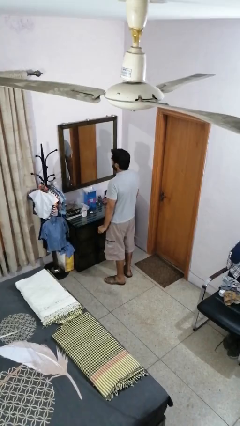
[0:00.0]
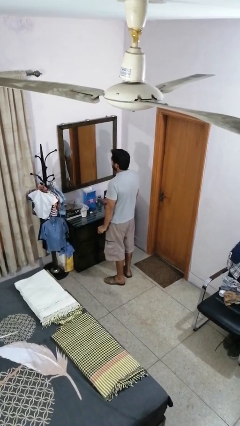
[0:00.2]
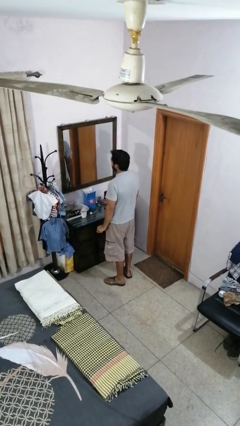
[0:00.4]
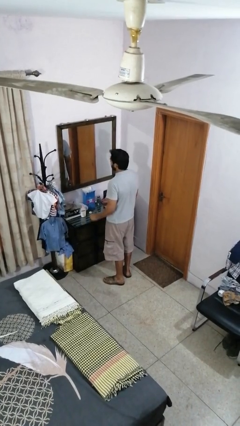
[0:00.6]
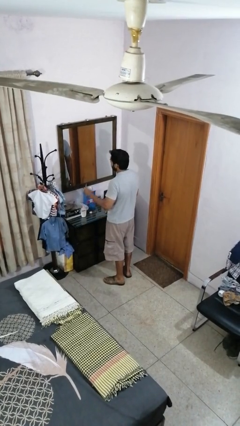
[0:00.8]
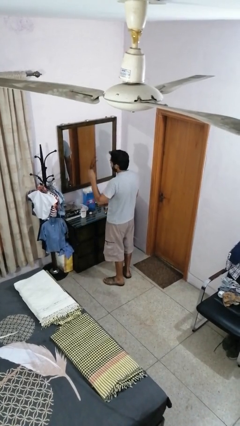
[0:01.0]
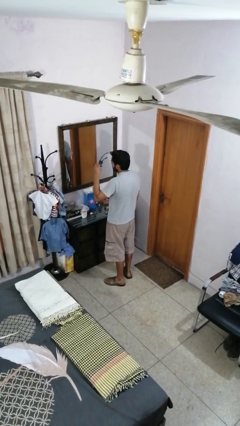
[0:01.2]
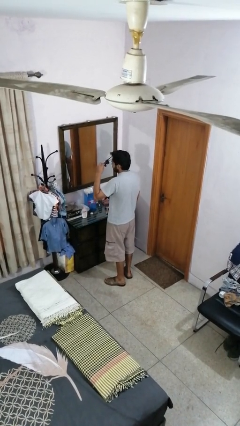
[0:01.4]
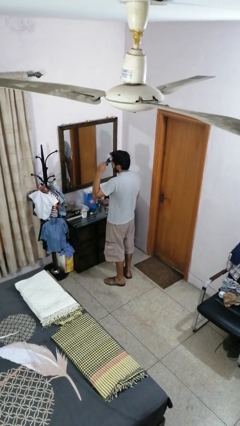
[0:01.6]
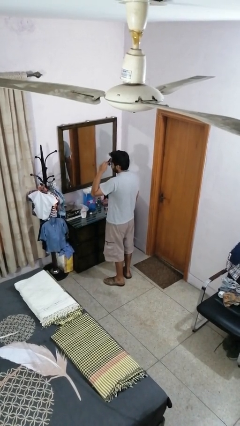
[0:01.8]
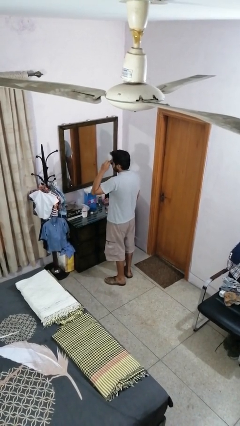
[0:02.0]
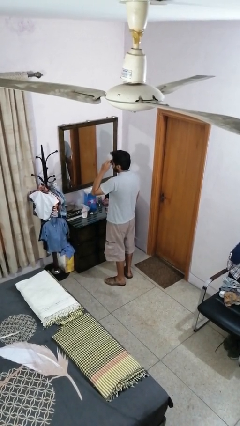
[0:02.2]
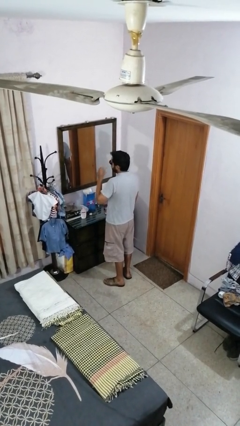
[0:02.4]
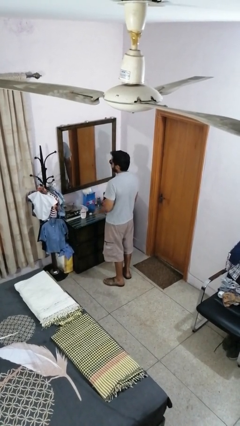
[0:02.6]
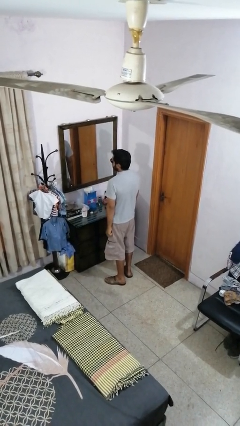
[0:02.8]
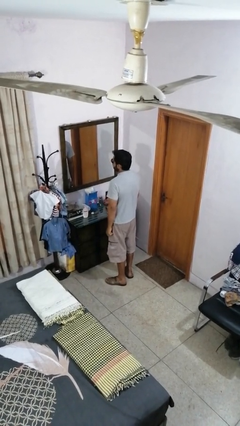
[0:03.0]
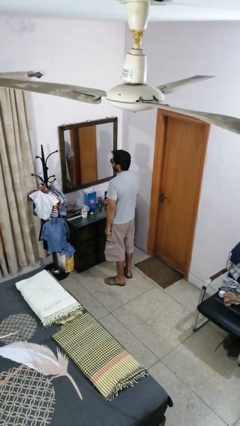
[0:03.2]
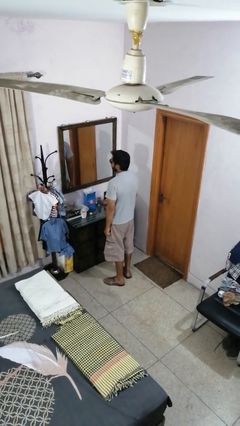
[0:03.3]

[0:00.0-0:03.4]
person puts on sunglasses

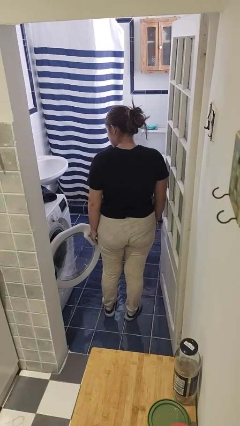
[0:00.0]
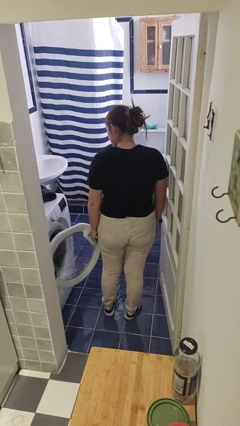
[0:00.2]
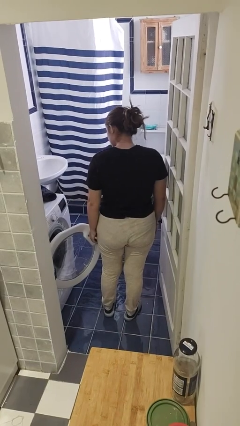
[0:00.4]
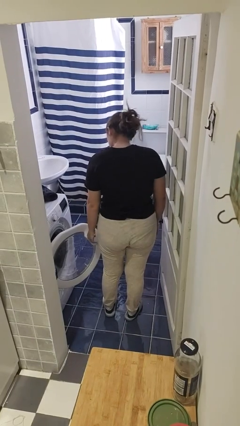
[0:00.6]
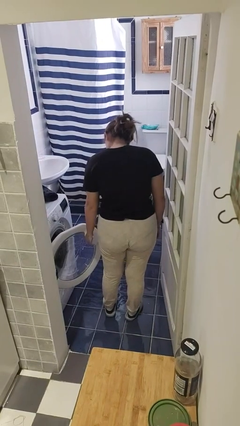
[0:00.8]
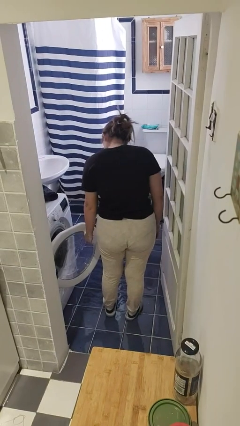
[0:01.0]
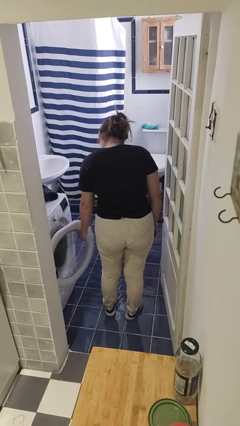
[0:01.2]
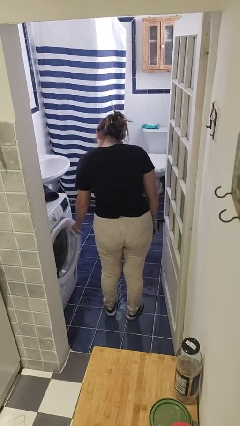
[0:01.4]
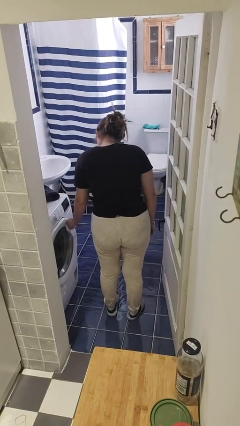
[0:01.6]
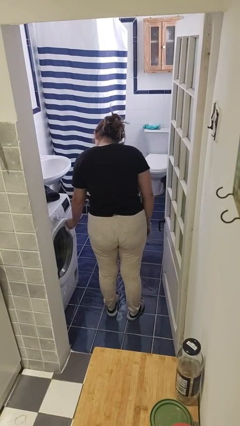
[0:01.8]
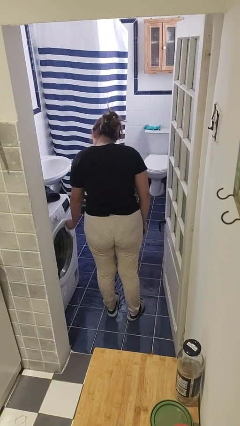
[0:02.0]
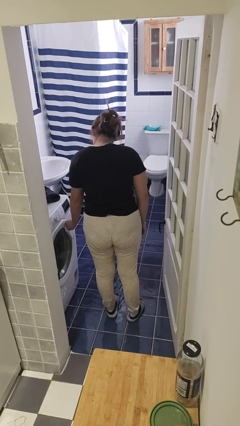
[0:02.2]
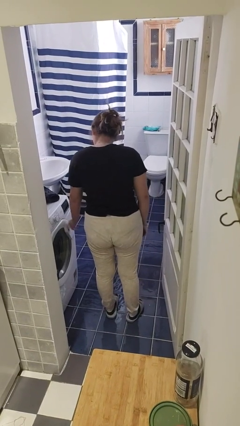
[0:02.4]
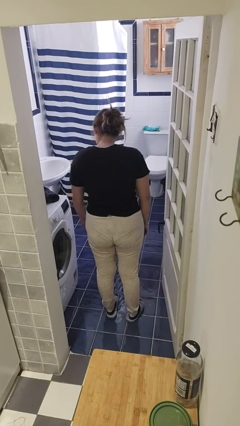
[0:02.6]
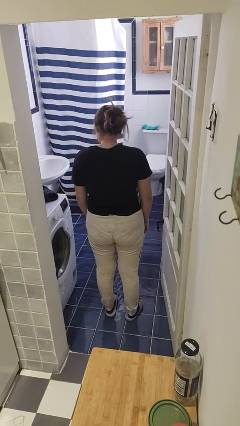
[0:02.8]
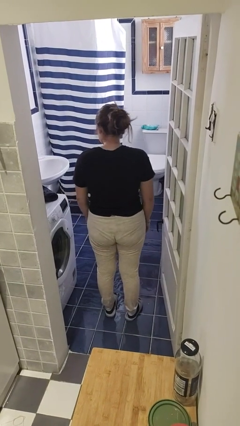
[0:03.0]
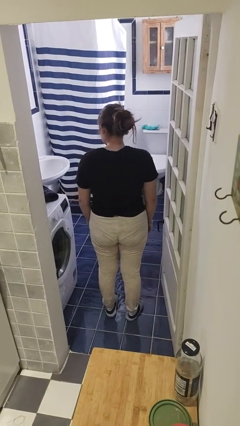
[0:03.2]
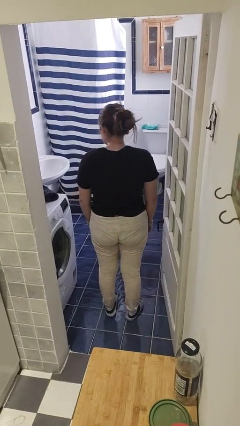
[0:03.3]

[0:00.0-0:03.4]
person closes clothes washer

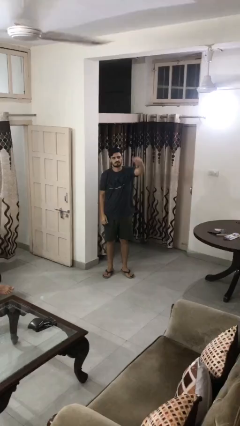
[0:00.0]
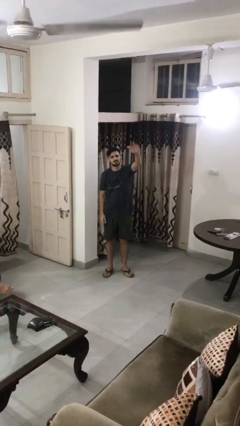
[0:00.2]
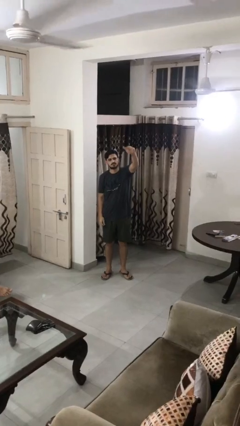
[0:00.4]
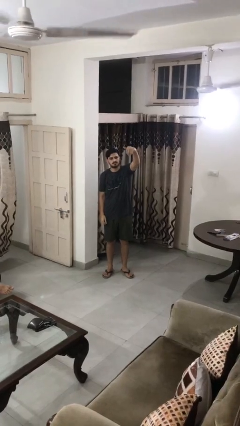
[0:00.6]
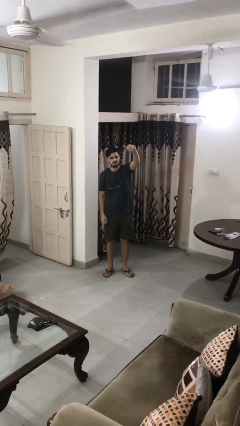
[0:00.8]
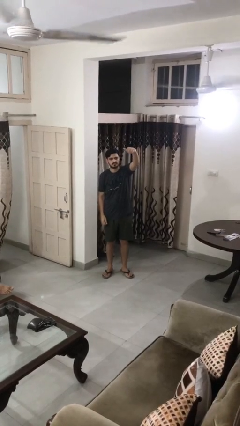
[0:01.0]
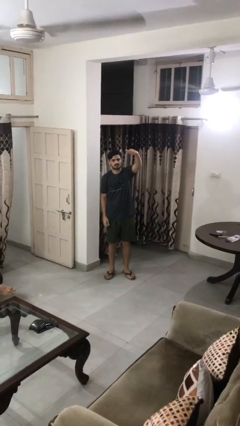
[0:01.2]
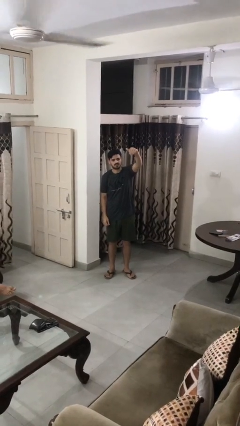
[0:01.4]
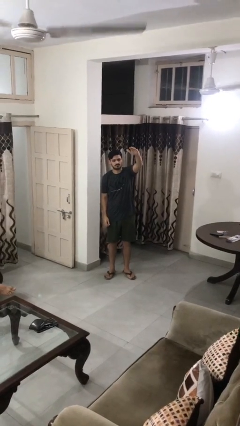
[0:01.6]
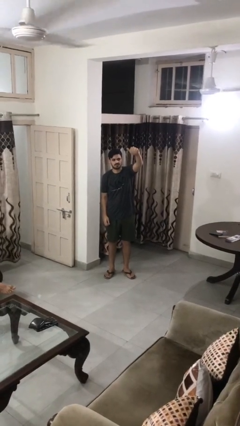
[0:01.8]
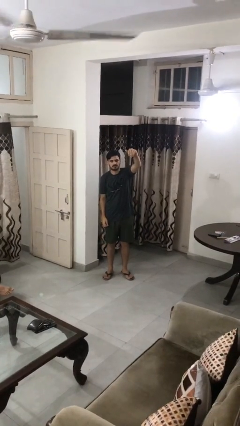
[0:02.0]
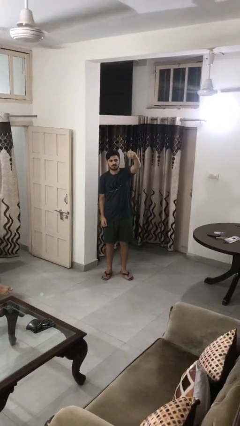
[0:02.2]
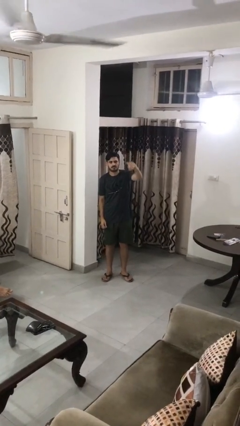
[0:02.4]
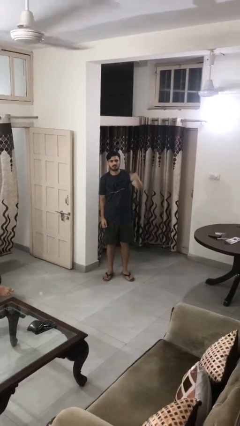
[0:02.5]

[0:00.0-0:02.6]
person gestures come here

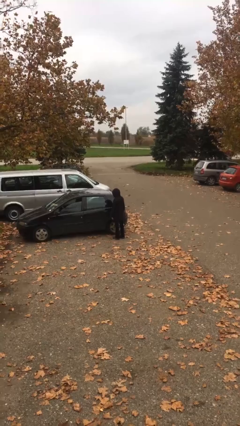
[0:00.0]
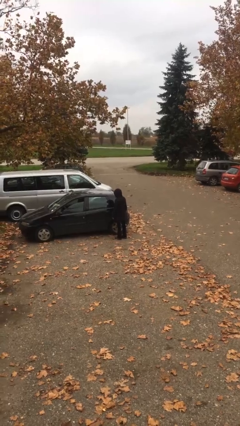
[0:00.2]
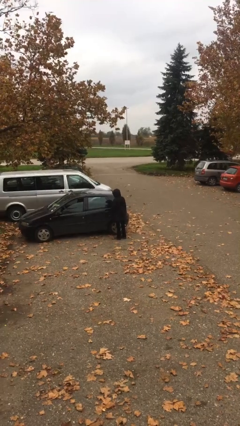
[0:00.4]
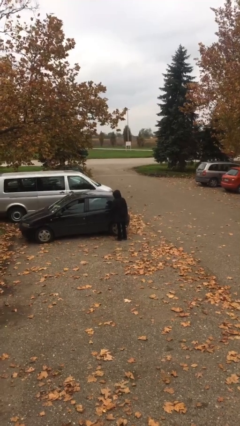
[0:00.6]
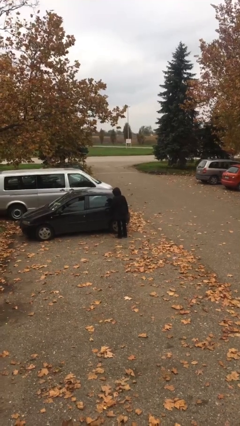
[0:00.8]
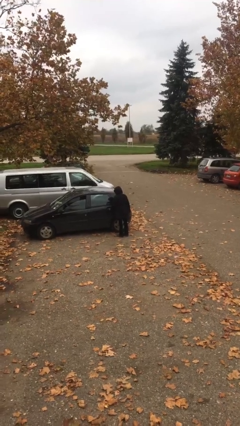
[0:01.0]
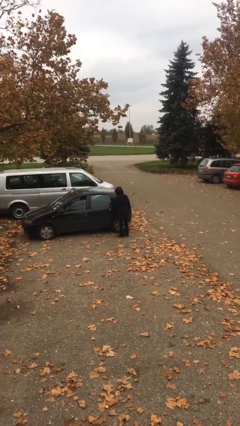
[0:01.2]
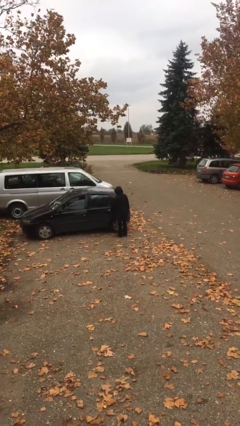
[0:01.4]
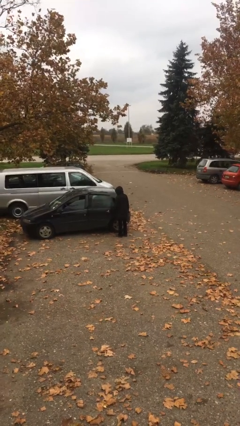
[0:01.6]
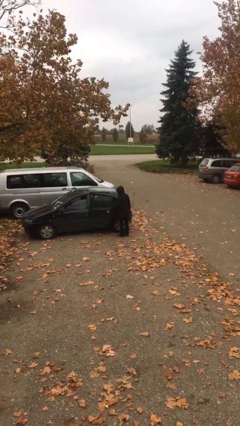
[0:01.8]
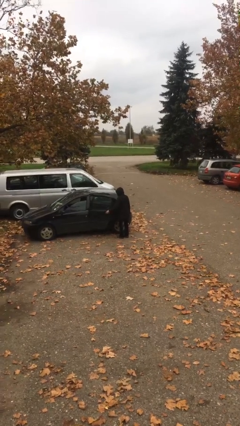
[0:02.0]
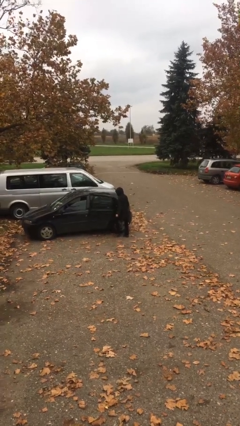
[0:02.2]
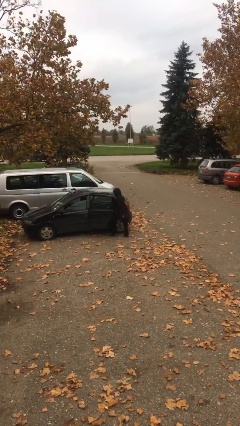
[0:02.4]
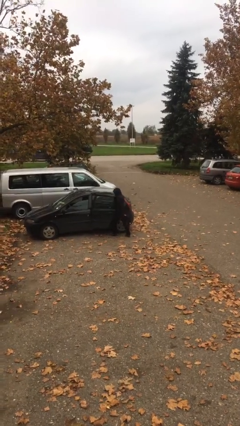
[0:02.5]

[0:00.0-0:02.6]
person opens car door

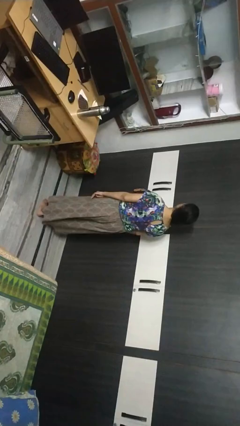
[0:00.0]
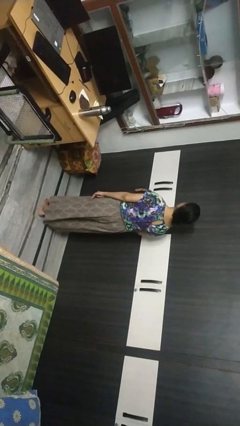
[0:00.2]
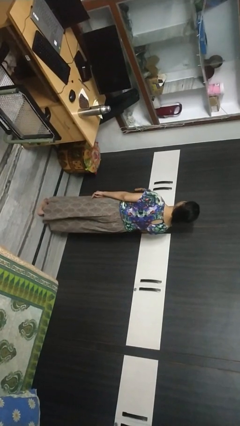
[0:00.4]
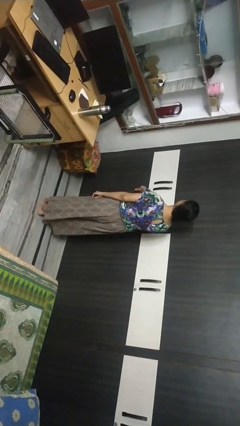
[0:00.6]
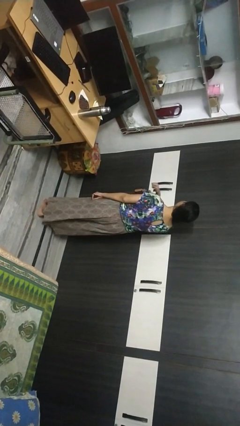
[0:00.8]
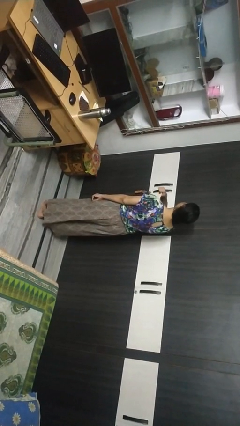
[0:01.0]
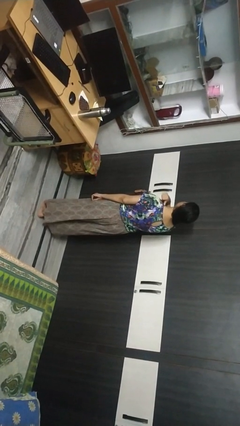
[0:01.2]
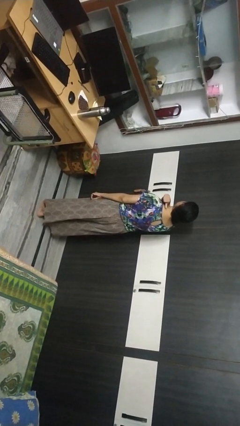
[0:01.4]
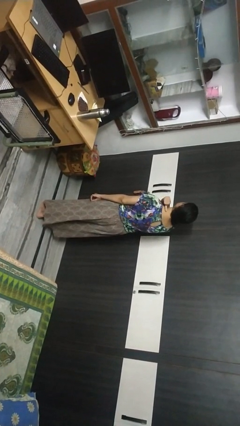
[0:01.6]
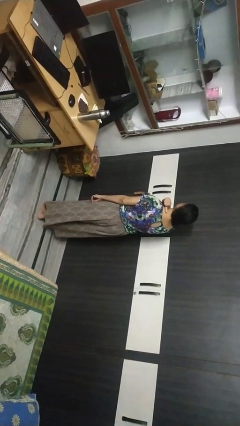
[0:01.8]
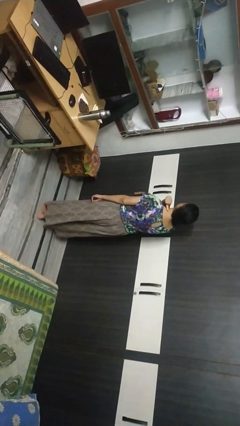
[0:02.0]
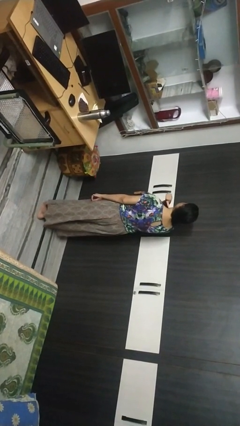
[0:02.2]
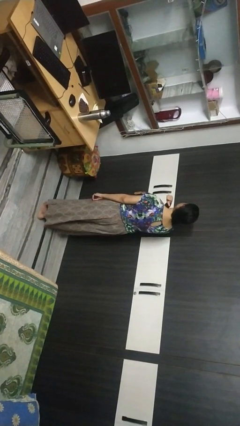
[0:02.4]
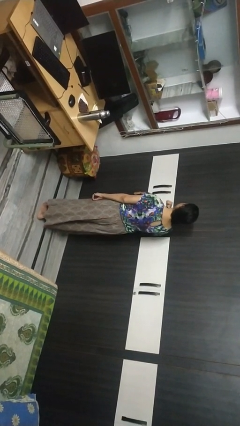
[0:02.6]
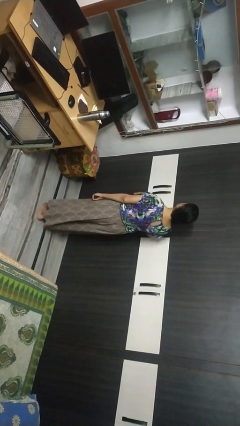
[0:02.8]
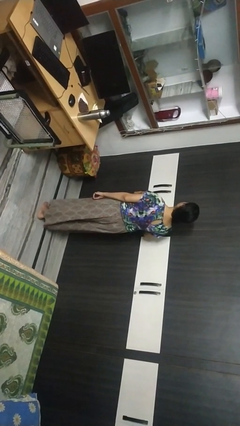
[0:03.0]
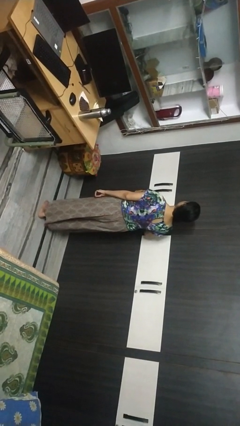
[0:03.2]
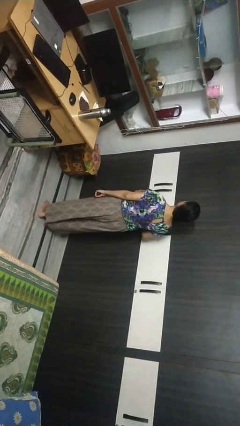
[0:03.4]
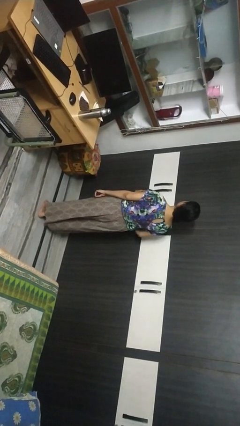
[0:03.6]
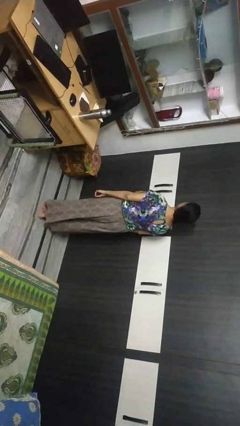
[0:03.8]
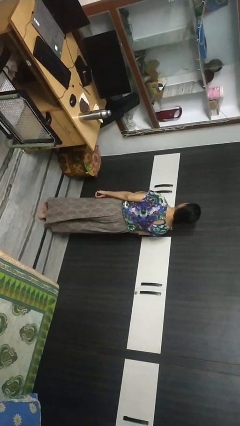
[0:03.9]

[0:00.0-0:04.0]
person gestures cut

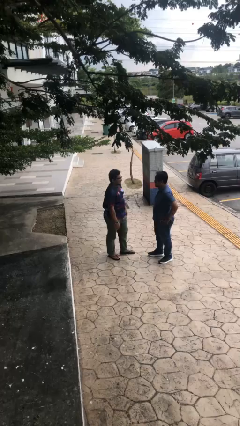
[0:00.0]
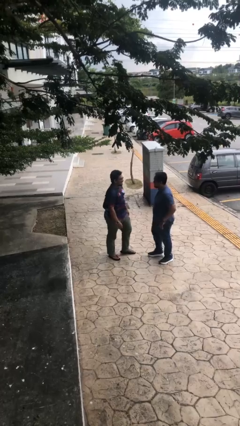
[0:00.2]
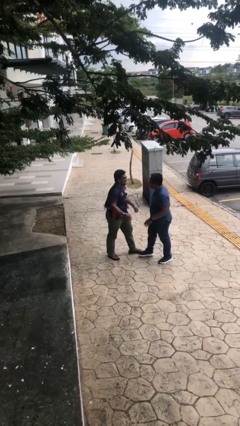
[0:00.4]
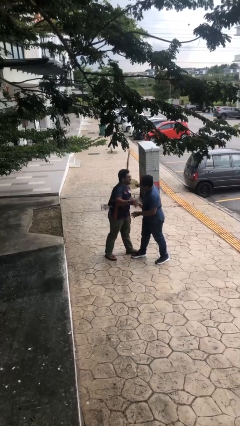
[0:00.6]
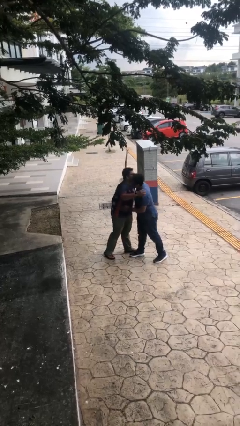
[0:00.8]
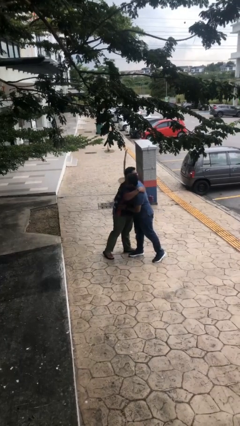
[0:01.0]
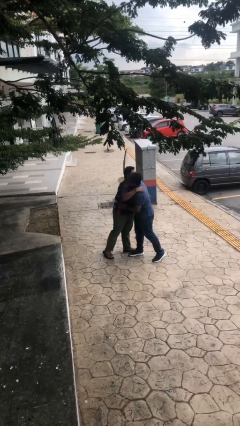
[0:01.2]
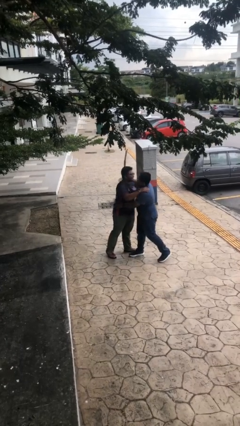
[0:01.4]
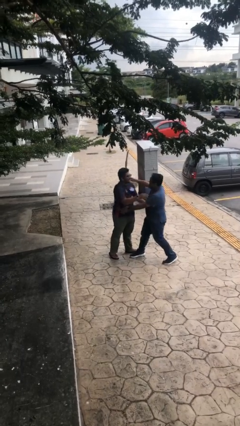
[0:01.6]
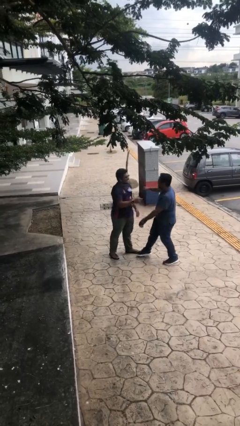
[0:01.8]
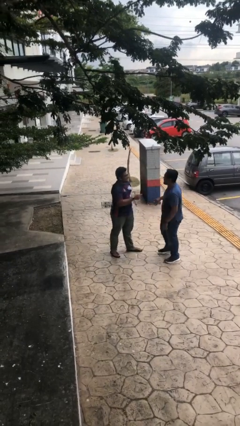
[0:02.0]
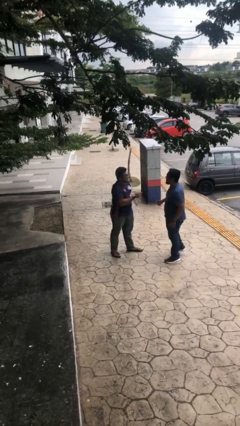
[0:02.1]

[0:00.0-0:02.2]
person embraces person
